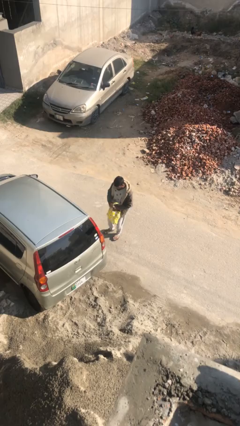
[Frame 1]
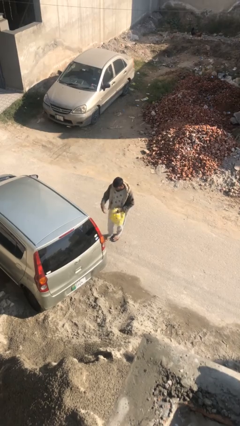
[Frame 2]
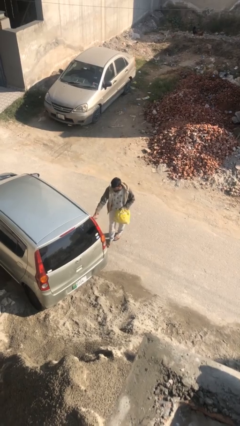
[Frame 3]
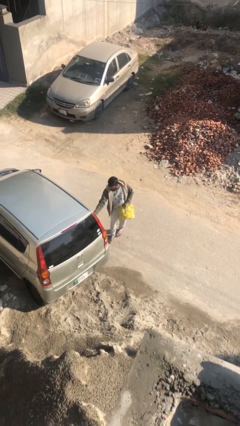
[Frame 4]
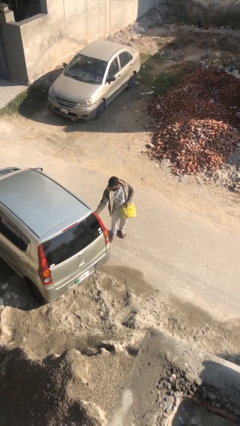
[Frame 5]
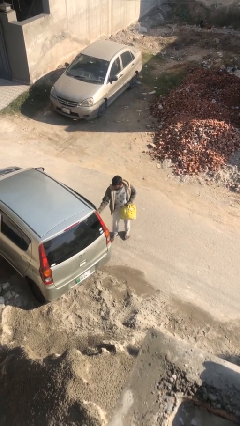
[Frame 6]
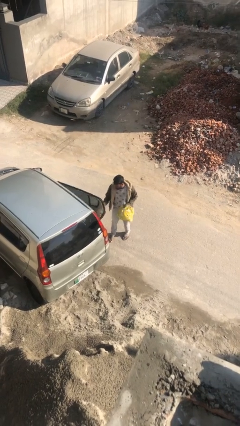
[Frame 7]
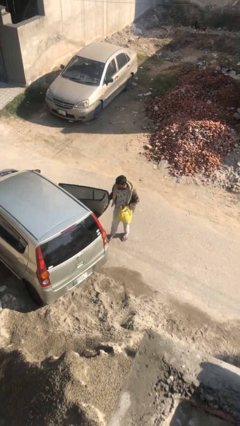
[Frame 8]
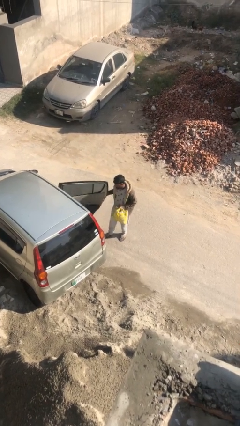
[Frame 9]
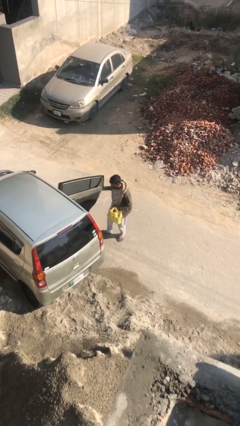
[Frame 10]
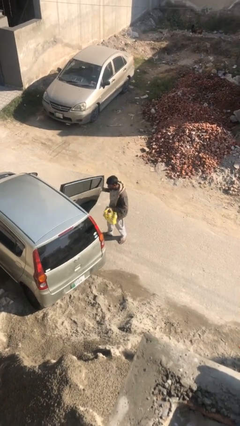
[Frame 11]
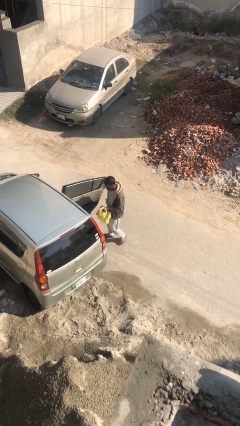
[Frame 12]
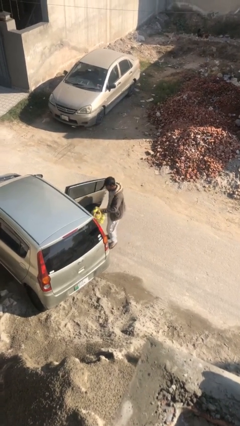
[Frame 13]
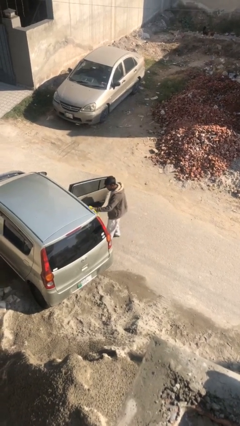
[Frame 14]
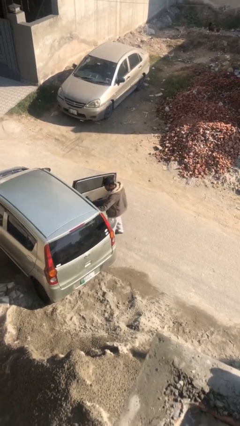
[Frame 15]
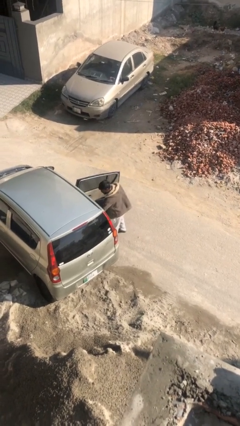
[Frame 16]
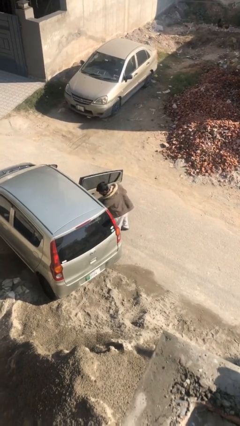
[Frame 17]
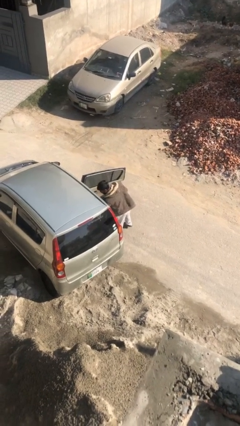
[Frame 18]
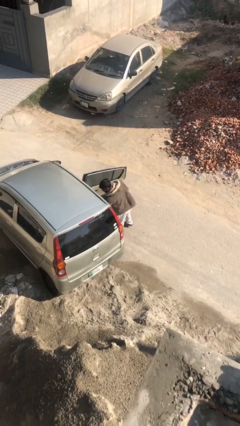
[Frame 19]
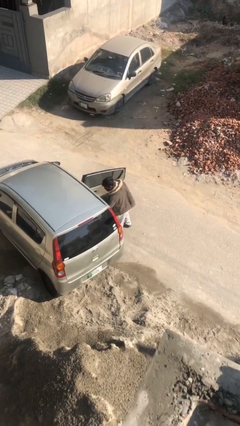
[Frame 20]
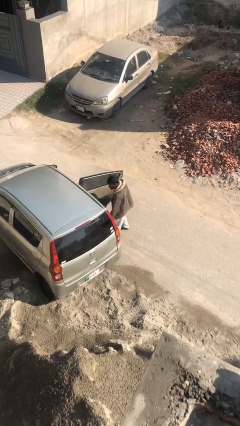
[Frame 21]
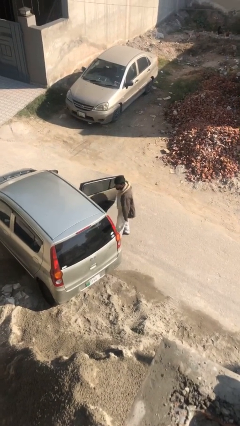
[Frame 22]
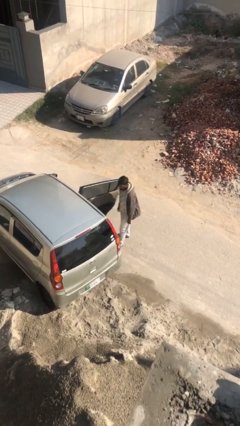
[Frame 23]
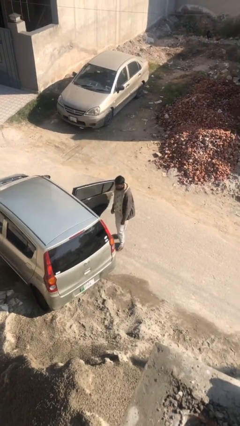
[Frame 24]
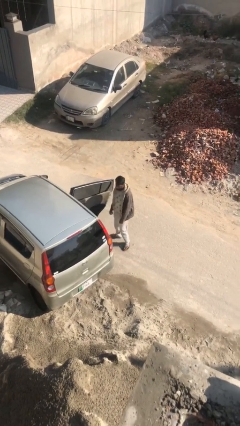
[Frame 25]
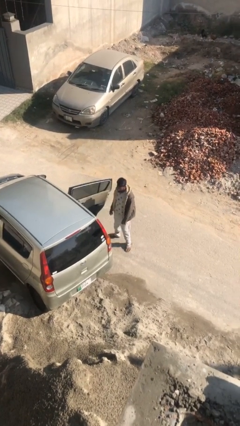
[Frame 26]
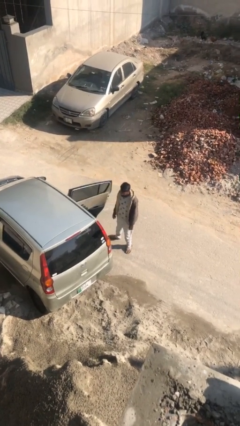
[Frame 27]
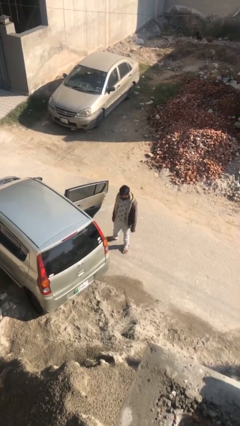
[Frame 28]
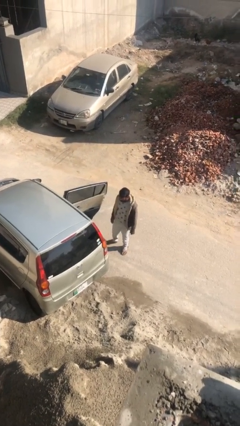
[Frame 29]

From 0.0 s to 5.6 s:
person loads car

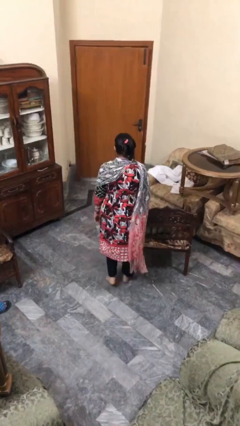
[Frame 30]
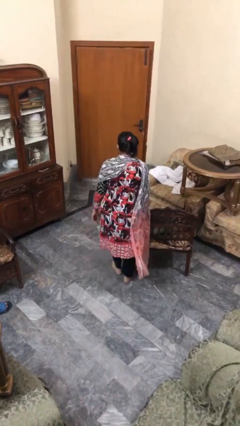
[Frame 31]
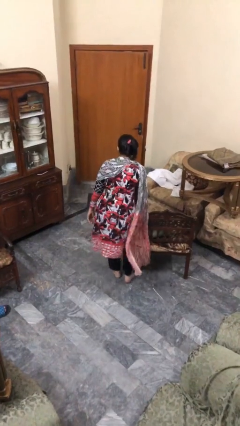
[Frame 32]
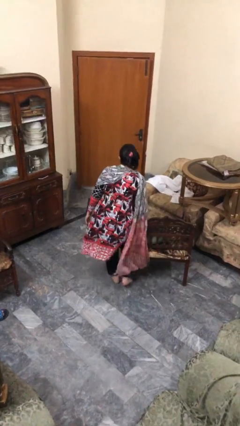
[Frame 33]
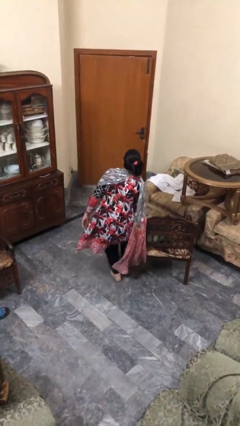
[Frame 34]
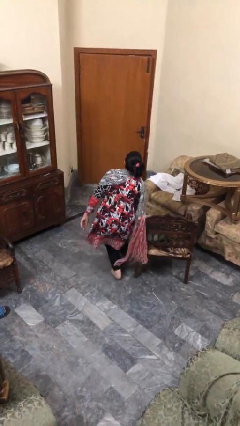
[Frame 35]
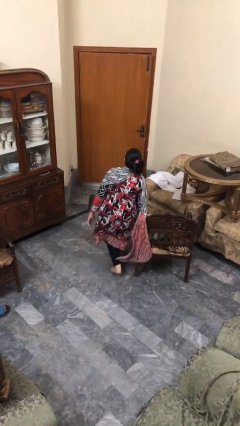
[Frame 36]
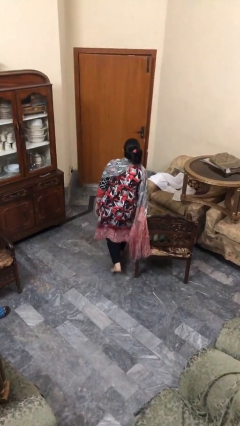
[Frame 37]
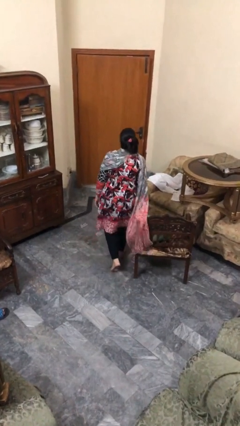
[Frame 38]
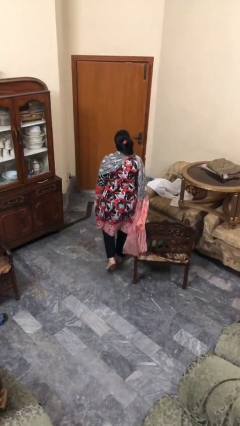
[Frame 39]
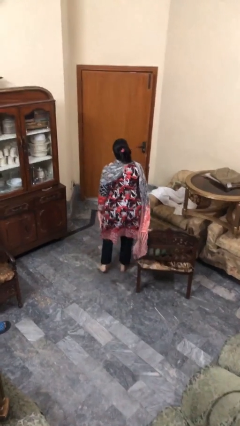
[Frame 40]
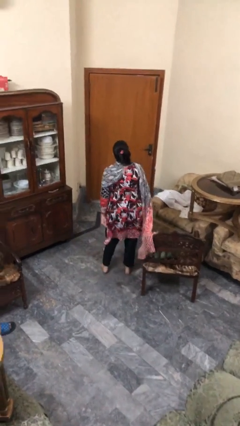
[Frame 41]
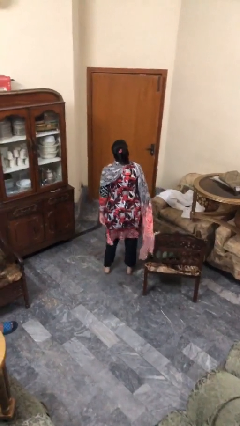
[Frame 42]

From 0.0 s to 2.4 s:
person stubs toe

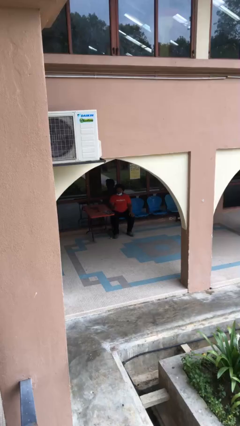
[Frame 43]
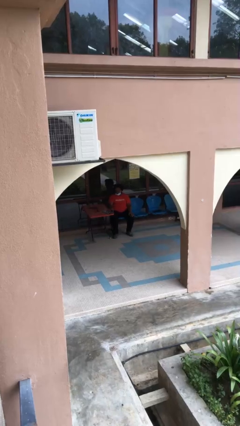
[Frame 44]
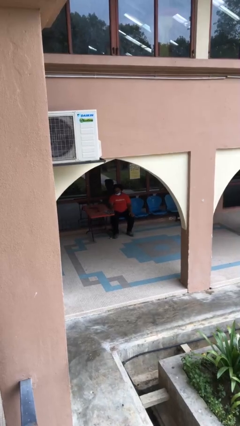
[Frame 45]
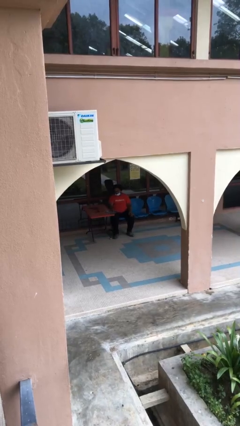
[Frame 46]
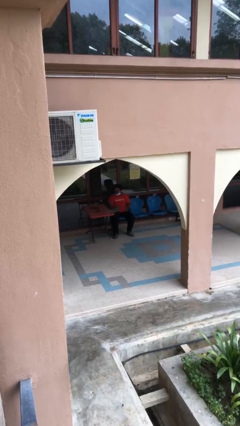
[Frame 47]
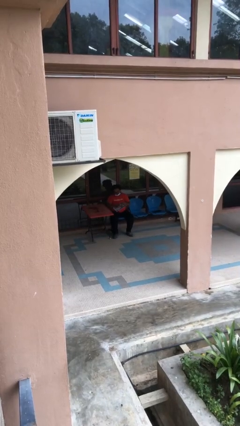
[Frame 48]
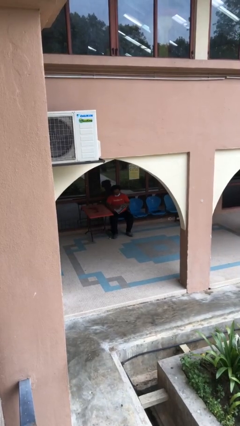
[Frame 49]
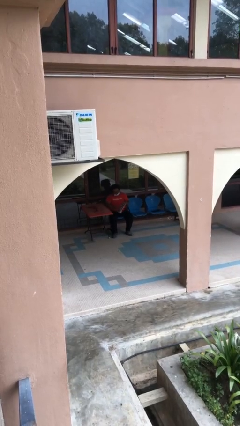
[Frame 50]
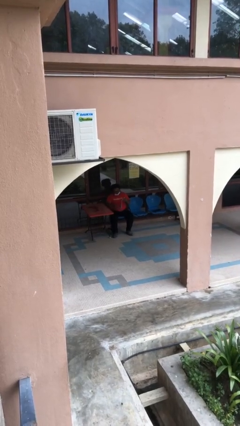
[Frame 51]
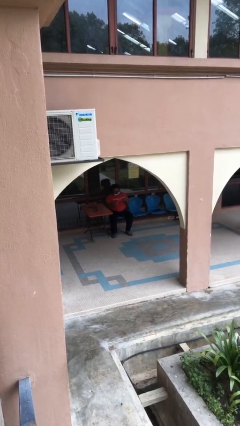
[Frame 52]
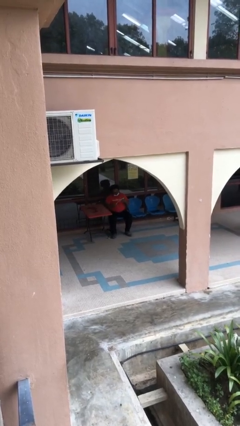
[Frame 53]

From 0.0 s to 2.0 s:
person picks up object from table

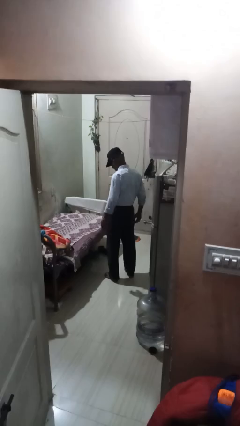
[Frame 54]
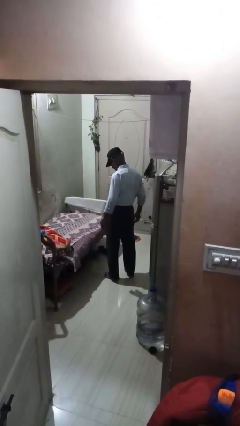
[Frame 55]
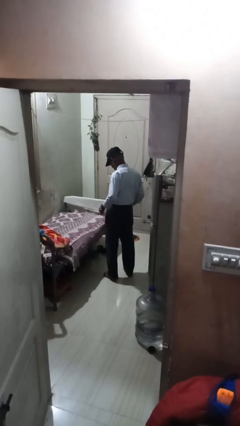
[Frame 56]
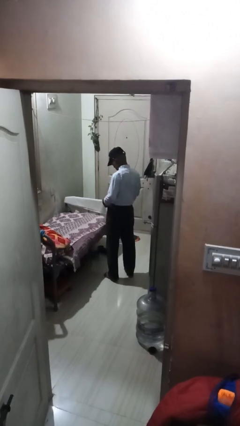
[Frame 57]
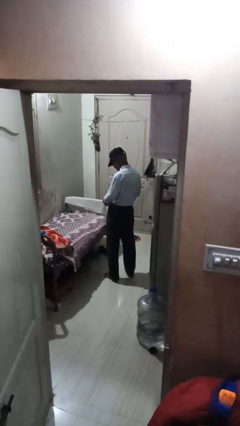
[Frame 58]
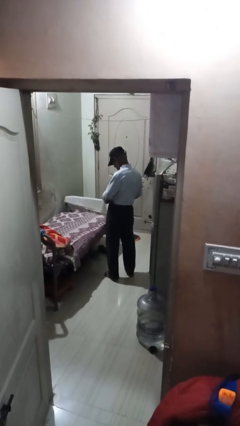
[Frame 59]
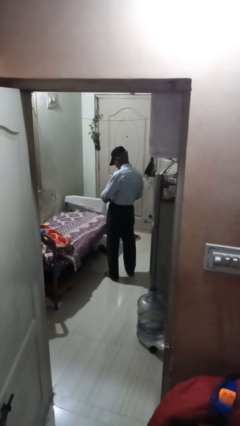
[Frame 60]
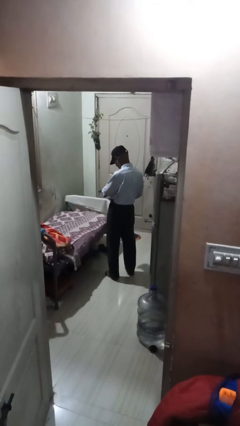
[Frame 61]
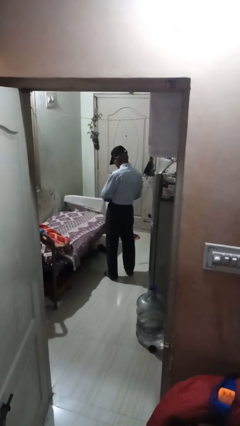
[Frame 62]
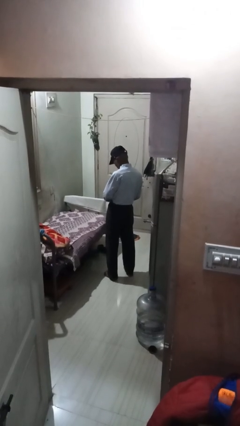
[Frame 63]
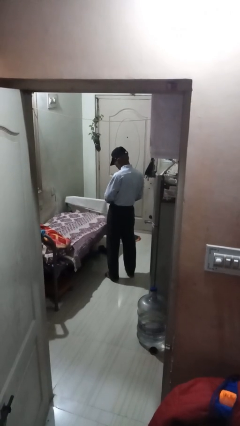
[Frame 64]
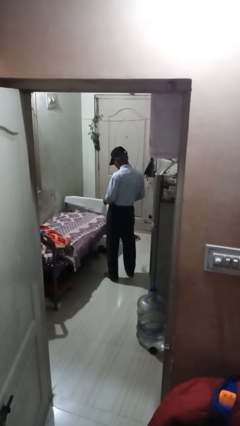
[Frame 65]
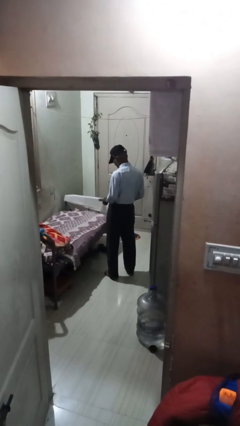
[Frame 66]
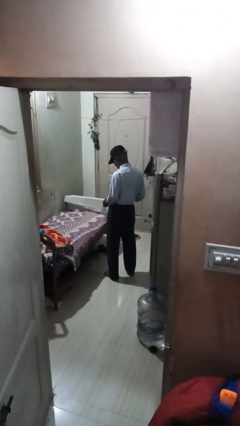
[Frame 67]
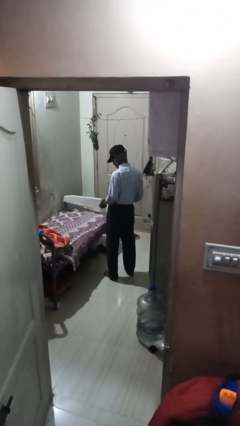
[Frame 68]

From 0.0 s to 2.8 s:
person takes off belt

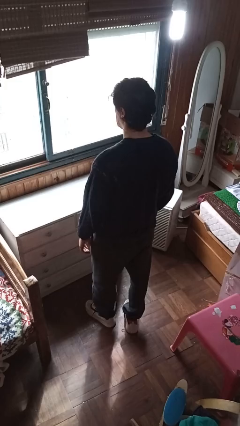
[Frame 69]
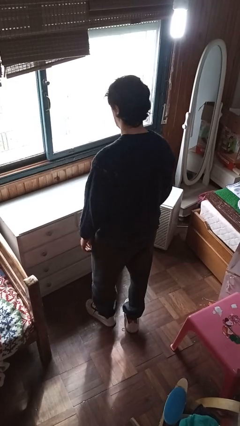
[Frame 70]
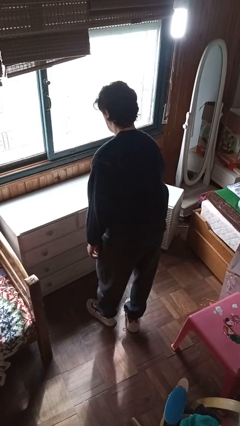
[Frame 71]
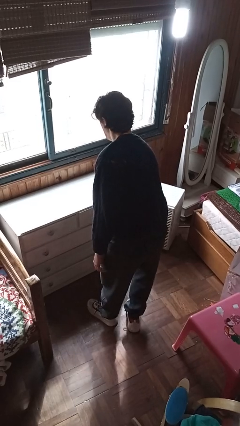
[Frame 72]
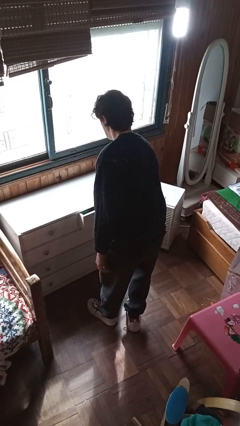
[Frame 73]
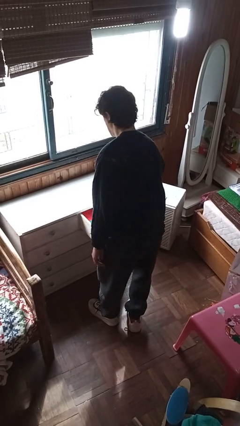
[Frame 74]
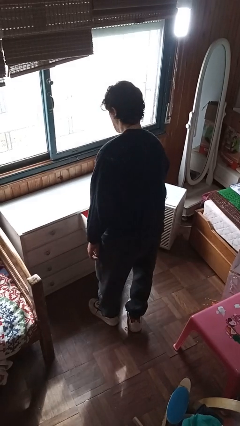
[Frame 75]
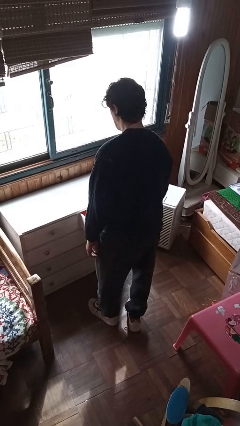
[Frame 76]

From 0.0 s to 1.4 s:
person opens dresser drawer

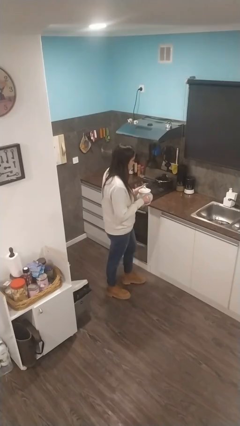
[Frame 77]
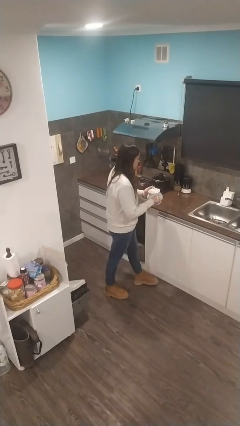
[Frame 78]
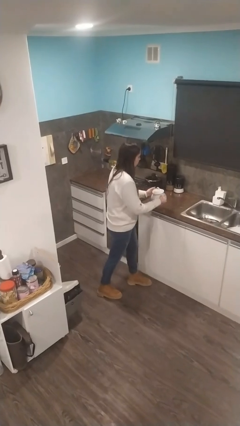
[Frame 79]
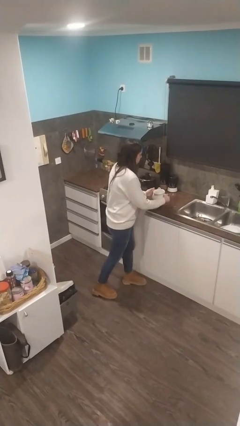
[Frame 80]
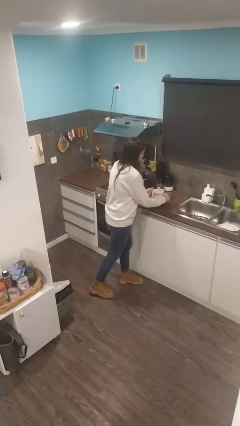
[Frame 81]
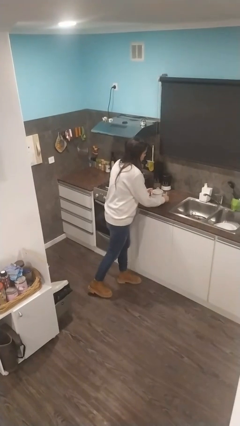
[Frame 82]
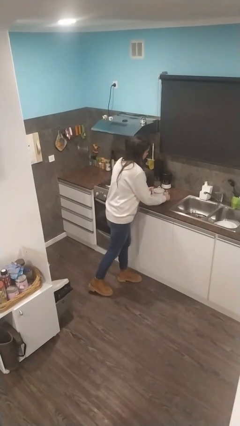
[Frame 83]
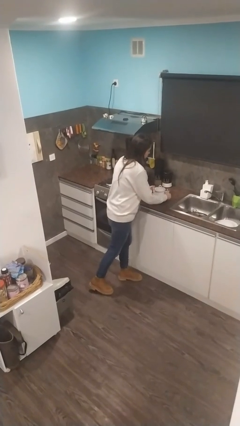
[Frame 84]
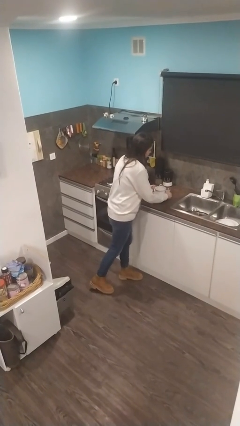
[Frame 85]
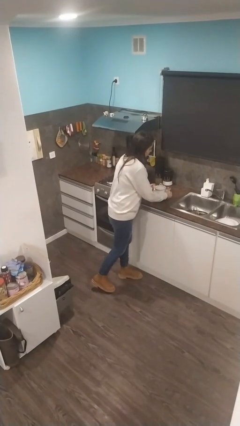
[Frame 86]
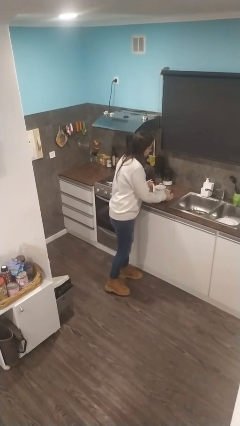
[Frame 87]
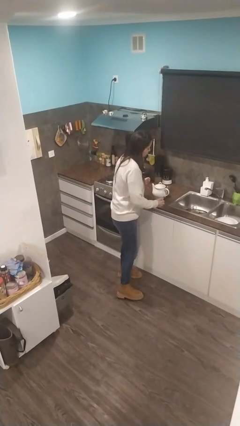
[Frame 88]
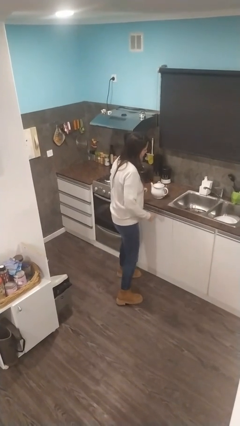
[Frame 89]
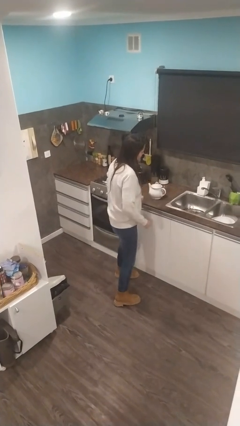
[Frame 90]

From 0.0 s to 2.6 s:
person puts down object on countertop

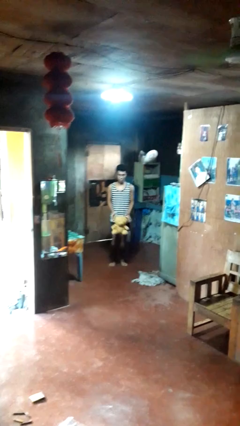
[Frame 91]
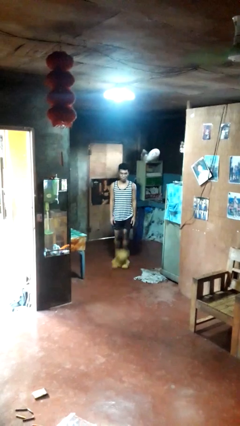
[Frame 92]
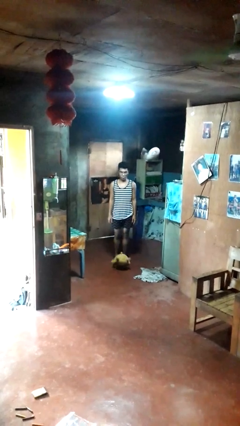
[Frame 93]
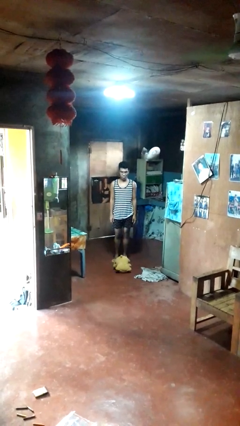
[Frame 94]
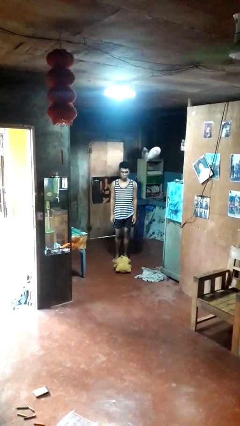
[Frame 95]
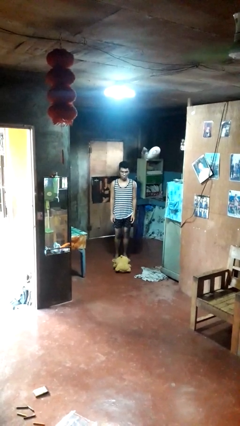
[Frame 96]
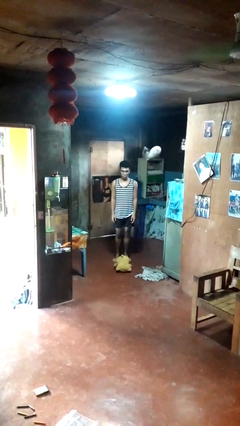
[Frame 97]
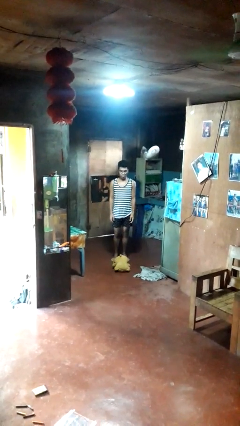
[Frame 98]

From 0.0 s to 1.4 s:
person drops object
